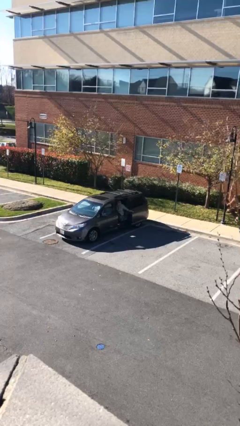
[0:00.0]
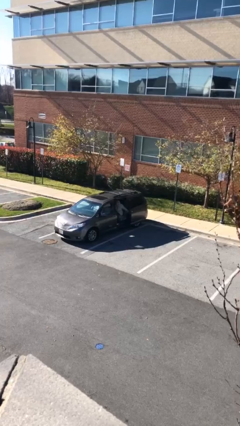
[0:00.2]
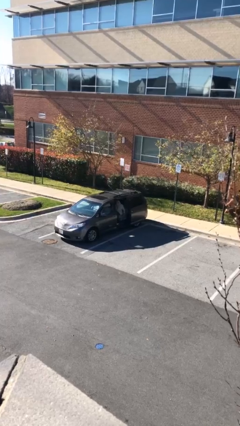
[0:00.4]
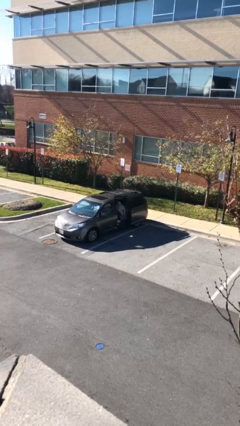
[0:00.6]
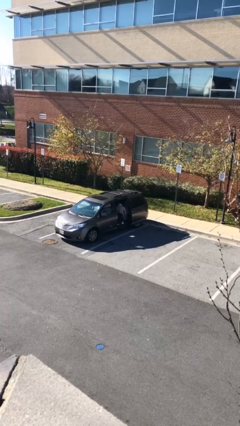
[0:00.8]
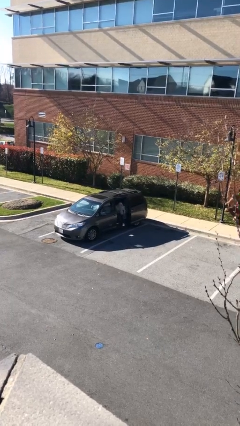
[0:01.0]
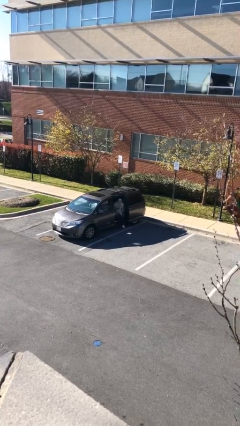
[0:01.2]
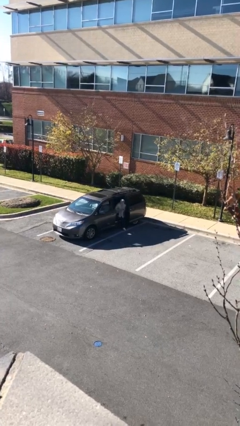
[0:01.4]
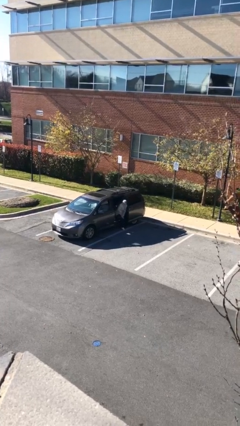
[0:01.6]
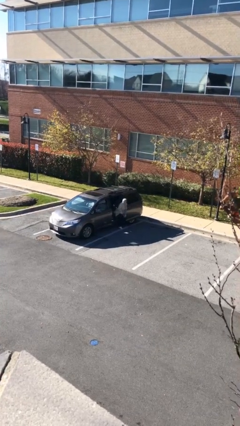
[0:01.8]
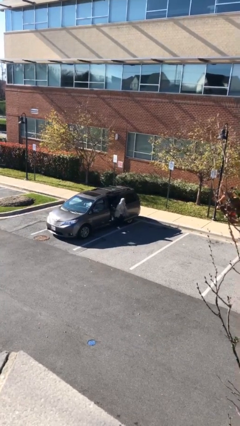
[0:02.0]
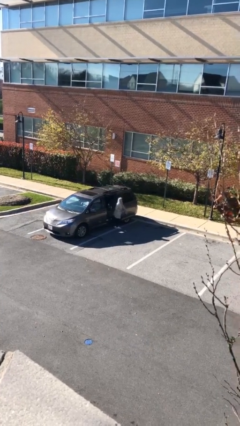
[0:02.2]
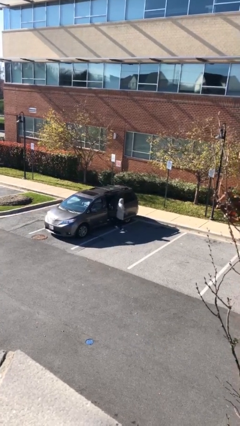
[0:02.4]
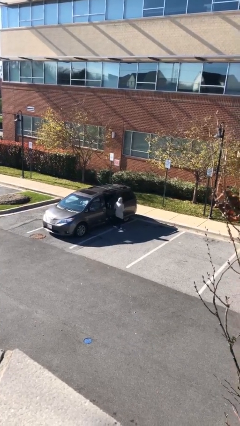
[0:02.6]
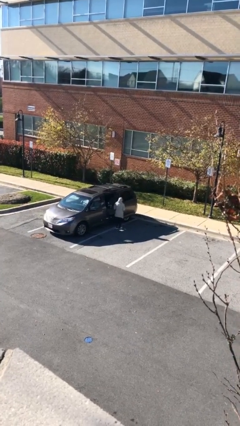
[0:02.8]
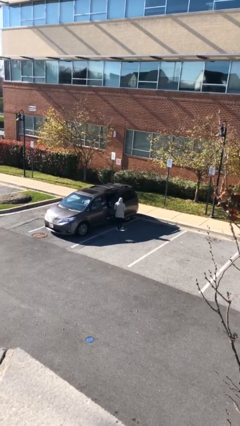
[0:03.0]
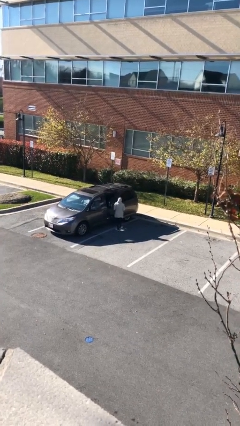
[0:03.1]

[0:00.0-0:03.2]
person exits car

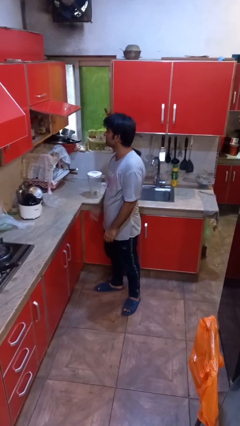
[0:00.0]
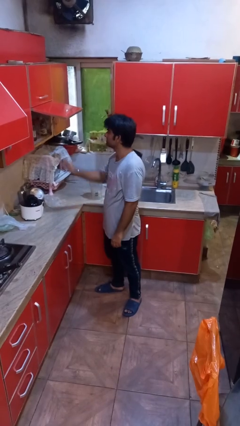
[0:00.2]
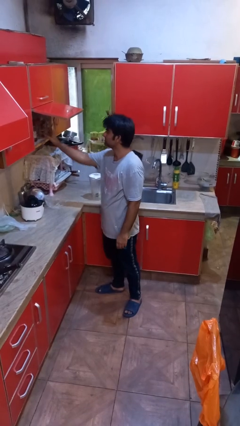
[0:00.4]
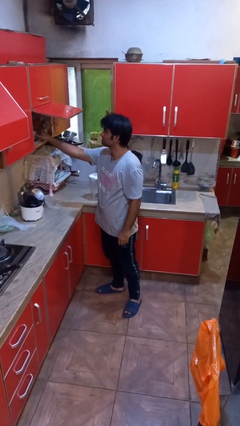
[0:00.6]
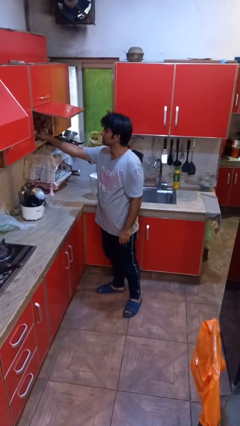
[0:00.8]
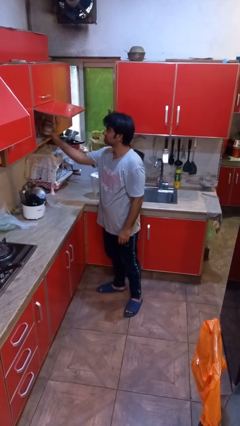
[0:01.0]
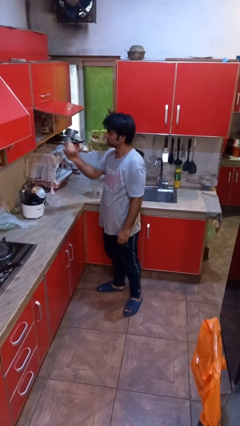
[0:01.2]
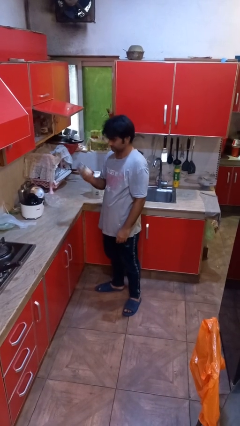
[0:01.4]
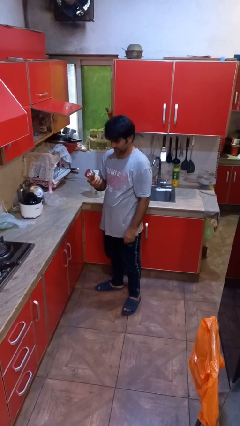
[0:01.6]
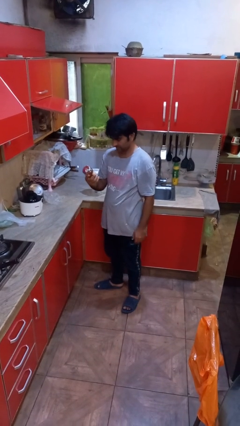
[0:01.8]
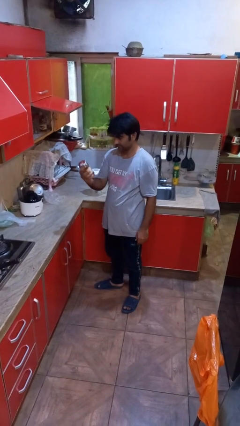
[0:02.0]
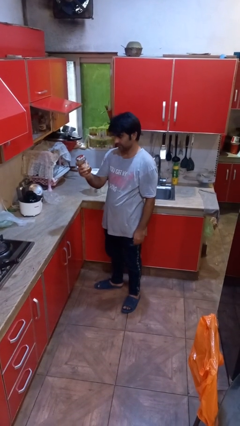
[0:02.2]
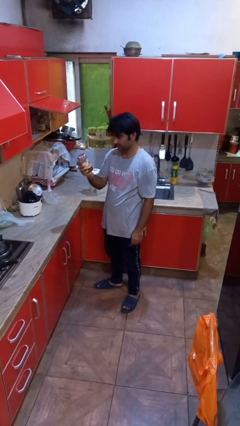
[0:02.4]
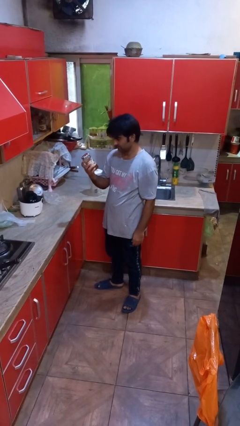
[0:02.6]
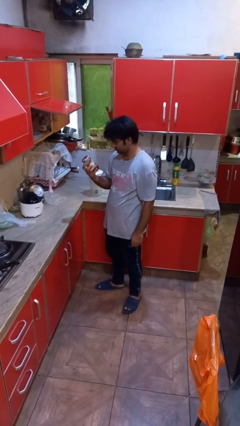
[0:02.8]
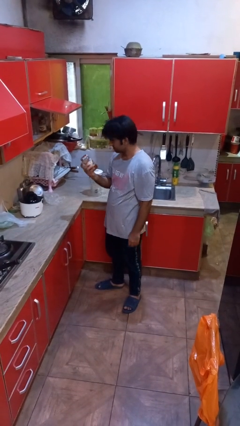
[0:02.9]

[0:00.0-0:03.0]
person picks up object from cabinet

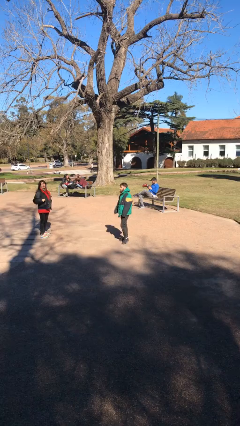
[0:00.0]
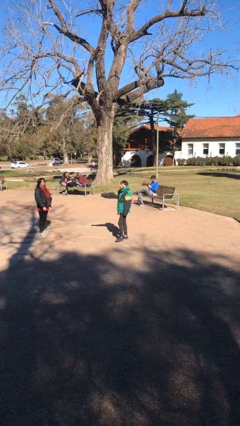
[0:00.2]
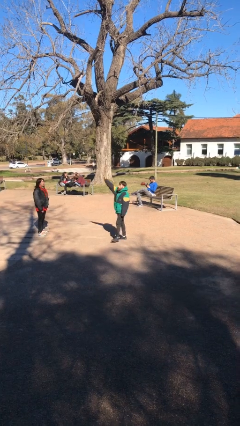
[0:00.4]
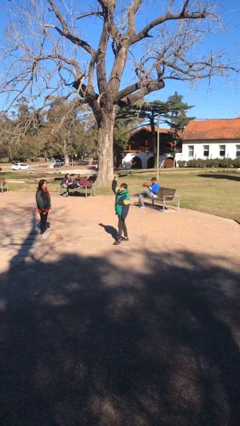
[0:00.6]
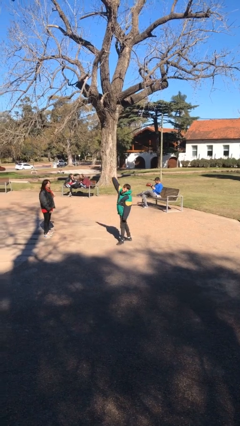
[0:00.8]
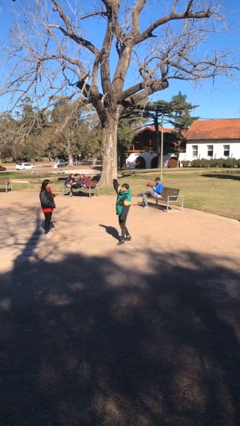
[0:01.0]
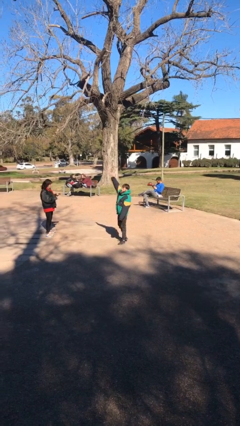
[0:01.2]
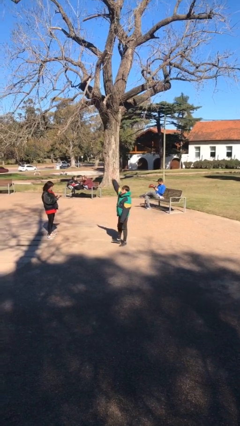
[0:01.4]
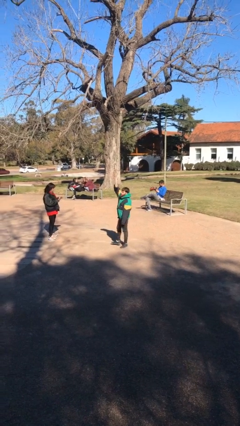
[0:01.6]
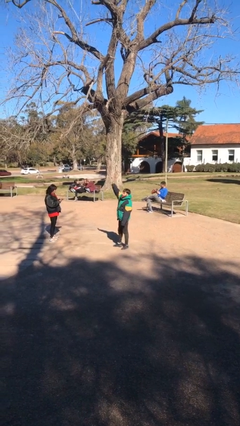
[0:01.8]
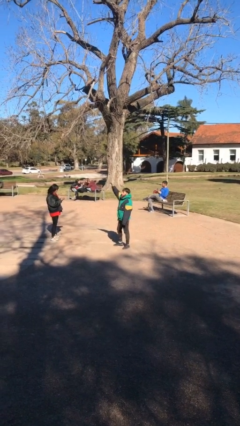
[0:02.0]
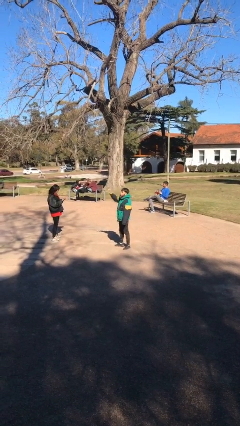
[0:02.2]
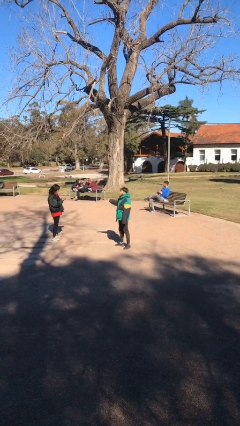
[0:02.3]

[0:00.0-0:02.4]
person waves at person

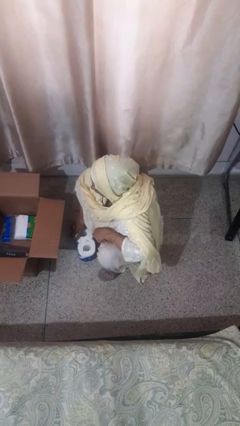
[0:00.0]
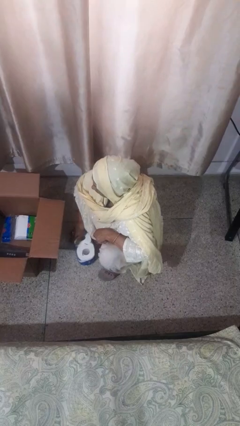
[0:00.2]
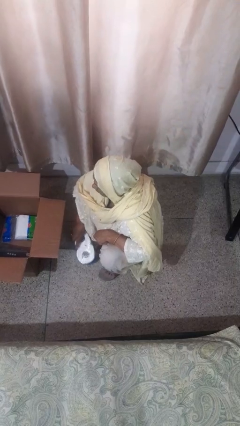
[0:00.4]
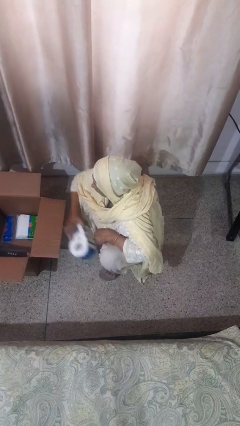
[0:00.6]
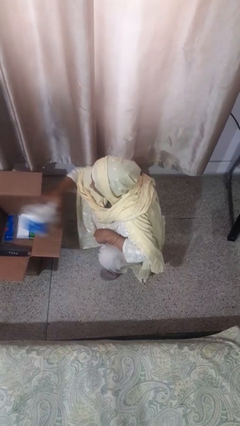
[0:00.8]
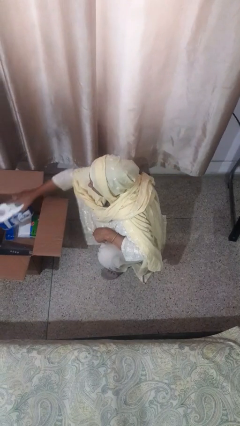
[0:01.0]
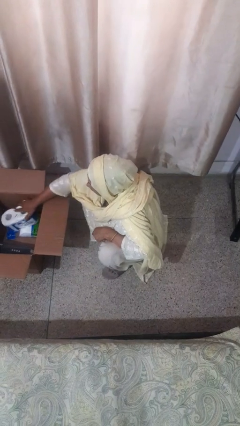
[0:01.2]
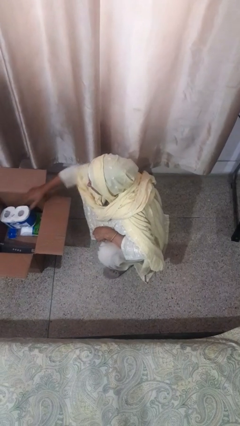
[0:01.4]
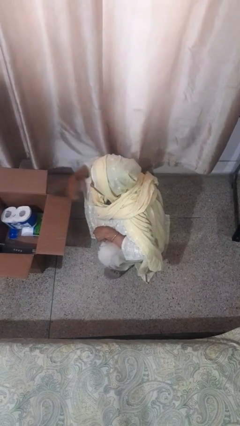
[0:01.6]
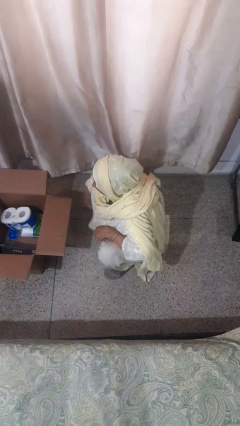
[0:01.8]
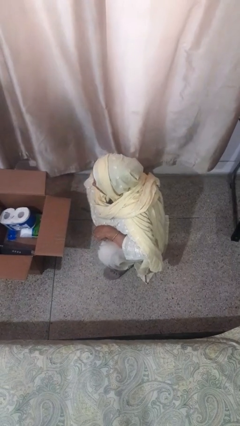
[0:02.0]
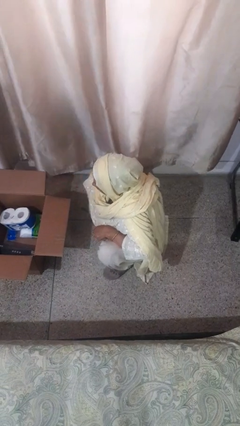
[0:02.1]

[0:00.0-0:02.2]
person puts object into box

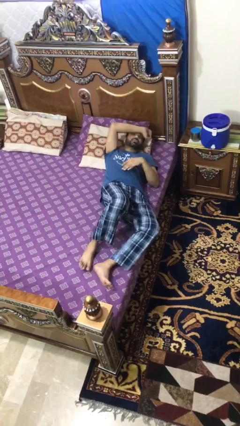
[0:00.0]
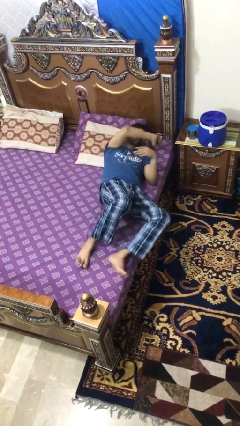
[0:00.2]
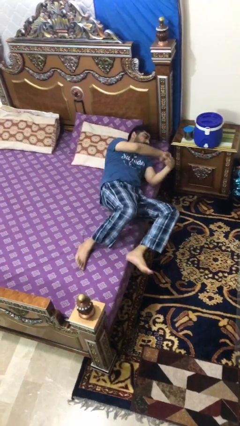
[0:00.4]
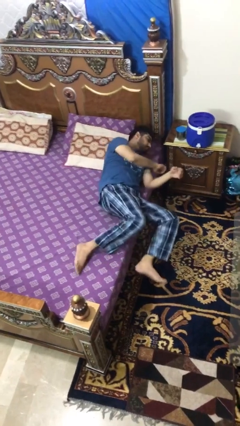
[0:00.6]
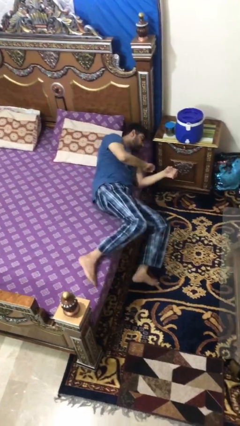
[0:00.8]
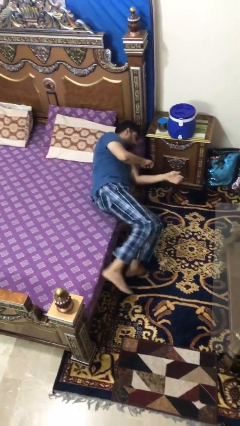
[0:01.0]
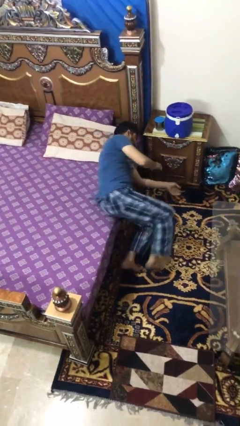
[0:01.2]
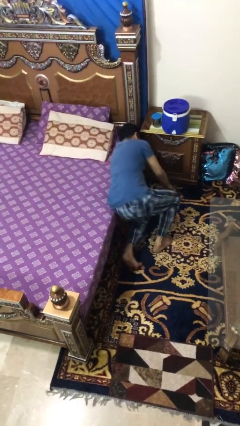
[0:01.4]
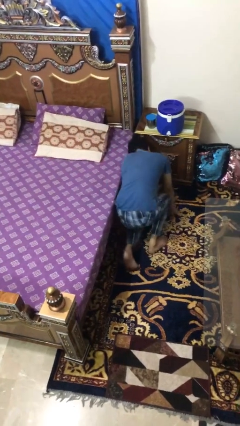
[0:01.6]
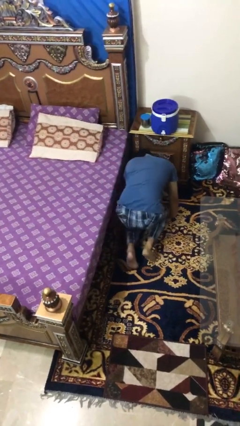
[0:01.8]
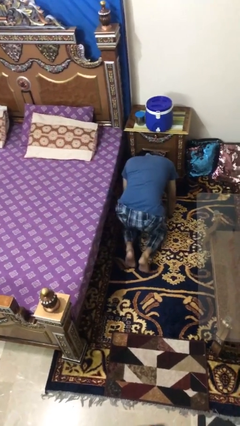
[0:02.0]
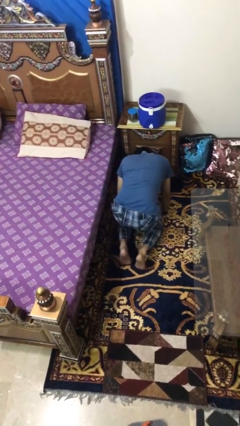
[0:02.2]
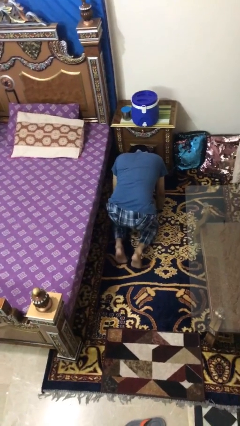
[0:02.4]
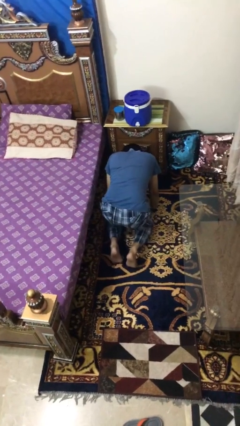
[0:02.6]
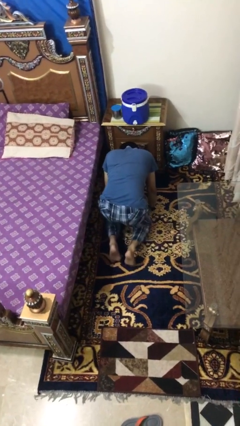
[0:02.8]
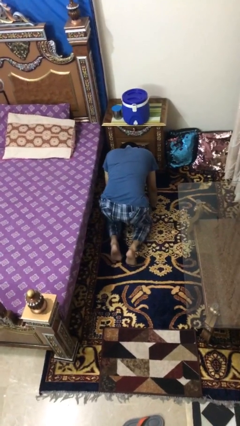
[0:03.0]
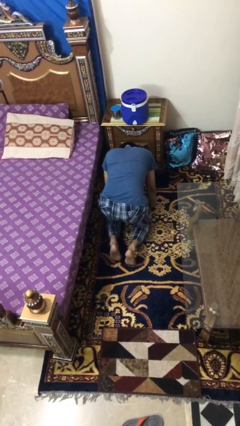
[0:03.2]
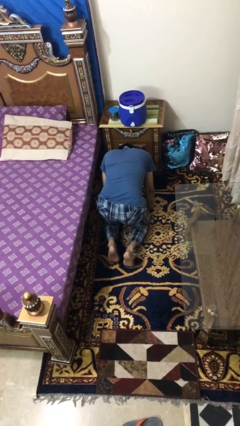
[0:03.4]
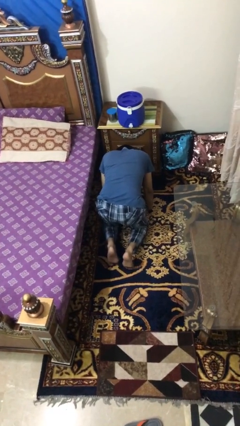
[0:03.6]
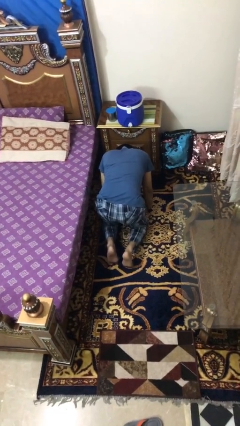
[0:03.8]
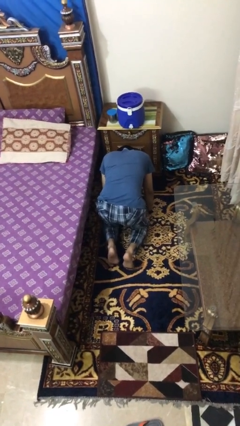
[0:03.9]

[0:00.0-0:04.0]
person falls from bed

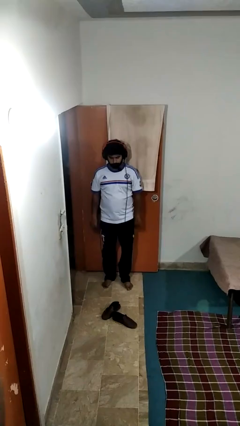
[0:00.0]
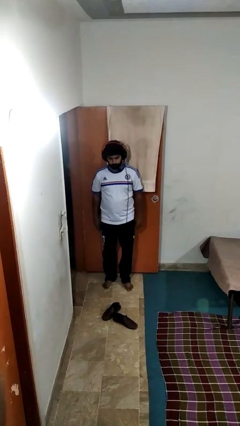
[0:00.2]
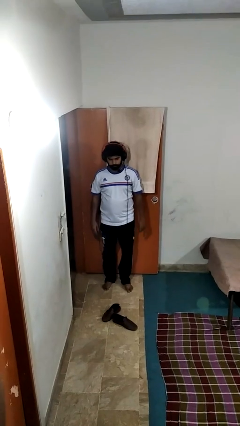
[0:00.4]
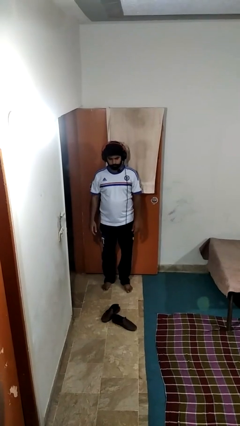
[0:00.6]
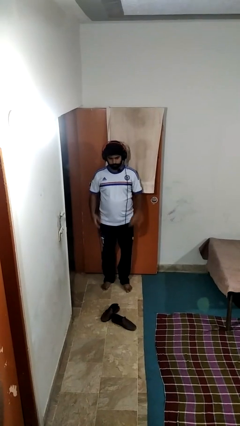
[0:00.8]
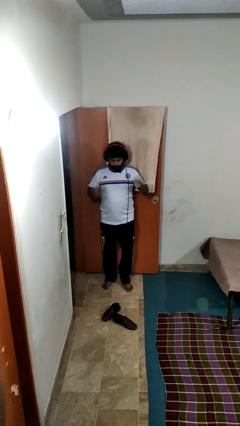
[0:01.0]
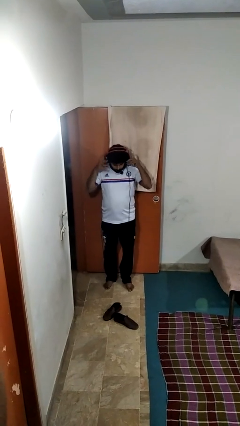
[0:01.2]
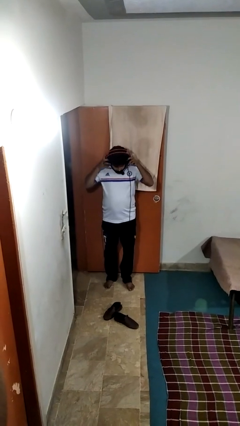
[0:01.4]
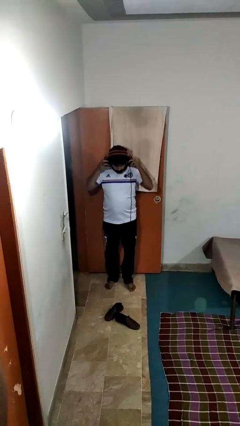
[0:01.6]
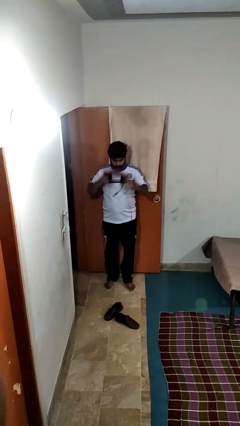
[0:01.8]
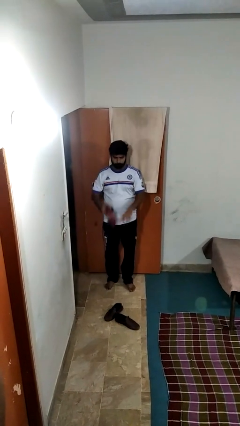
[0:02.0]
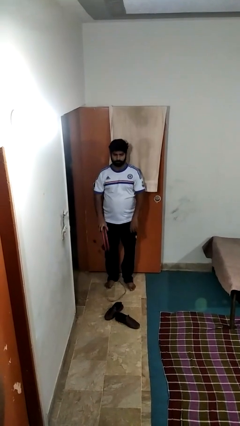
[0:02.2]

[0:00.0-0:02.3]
person takes off headphones

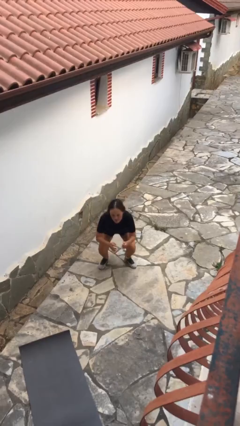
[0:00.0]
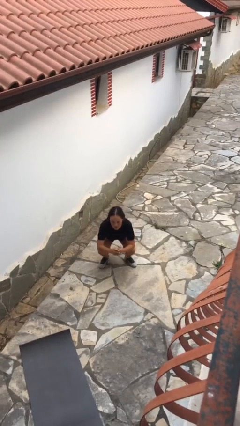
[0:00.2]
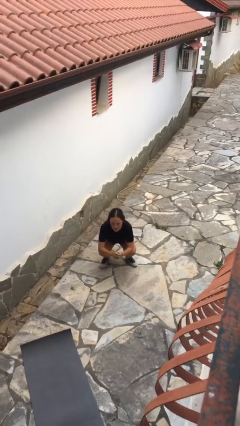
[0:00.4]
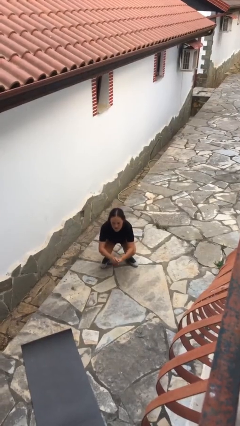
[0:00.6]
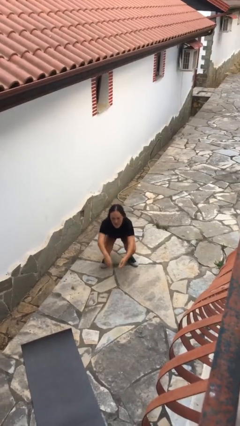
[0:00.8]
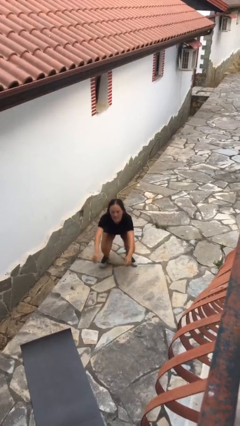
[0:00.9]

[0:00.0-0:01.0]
person squats
